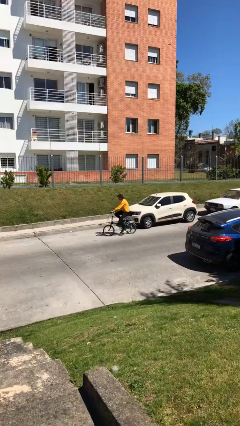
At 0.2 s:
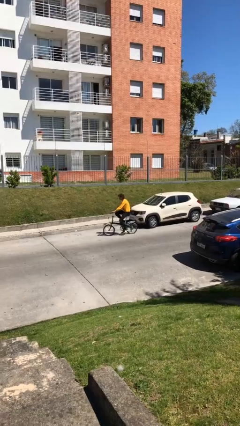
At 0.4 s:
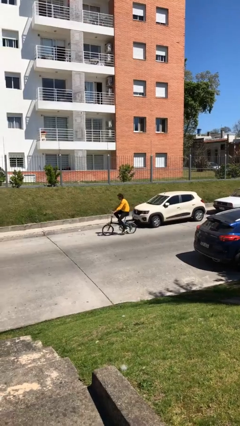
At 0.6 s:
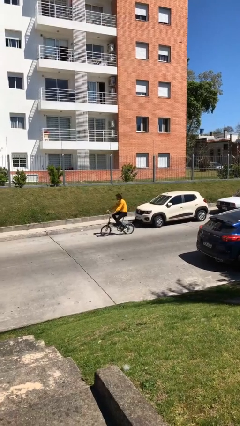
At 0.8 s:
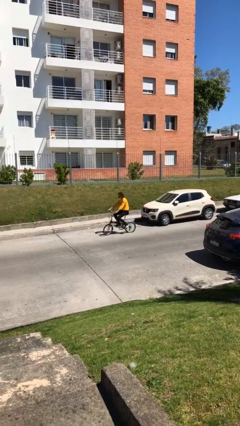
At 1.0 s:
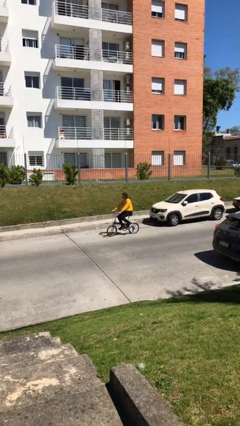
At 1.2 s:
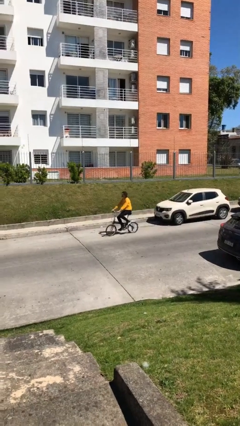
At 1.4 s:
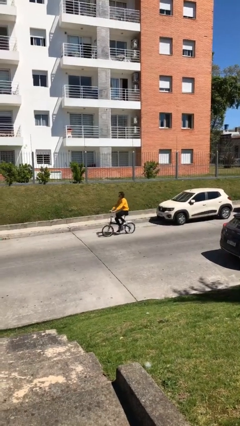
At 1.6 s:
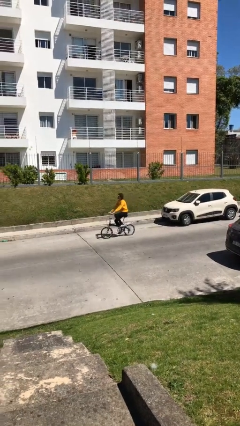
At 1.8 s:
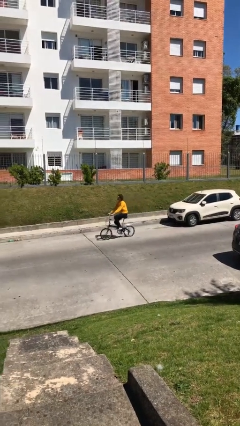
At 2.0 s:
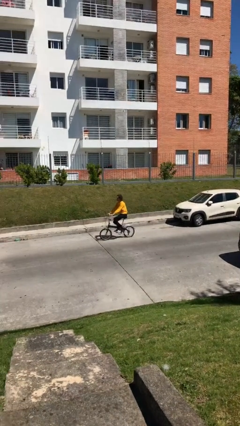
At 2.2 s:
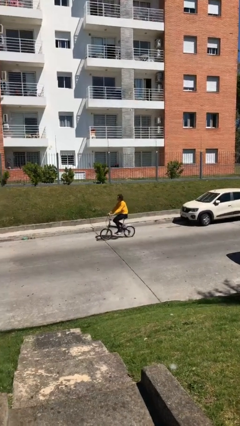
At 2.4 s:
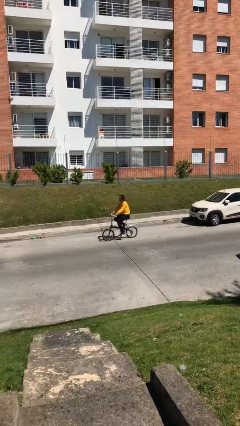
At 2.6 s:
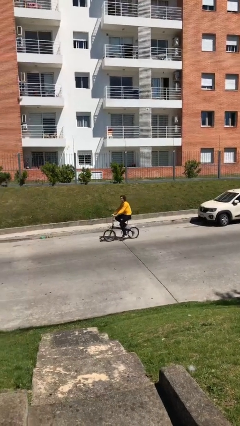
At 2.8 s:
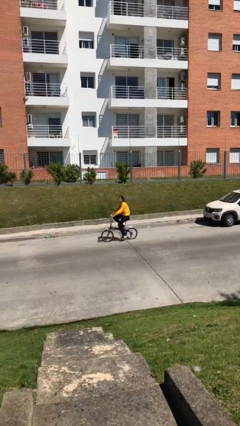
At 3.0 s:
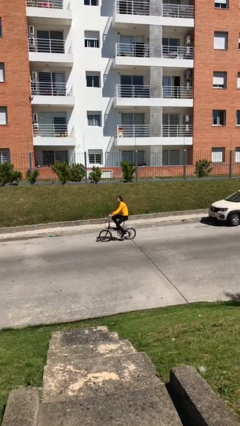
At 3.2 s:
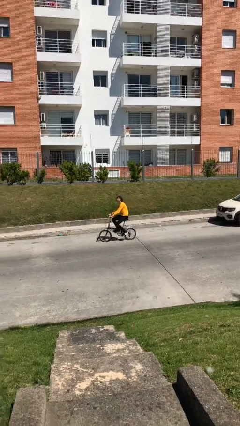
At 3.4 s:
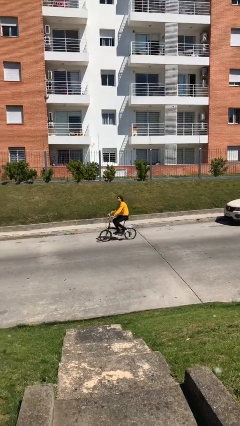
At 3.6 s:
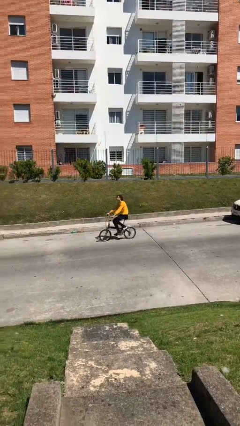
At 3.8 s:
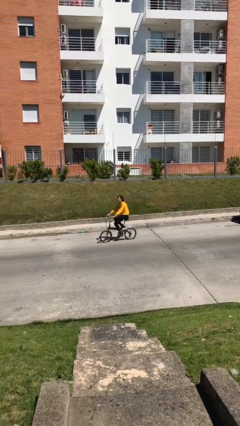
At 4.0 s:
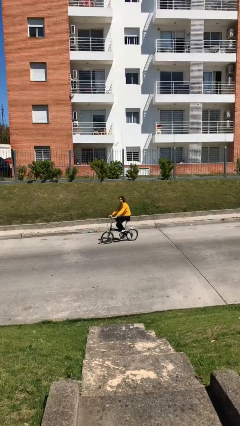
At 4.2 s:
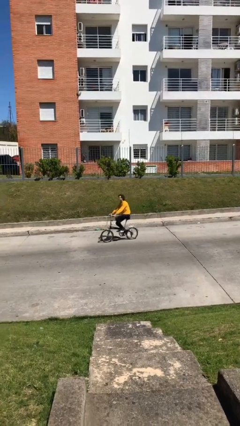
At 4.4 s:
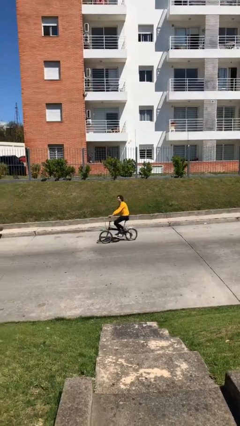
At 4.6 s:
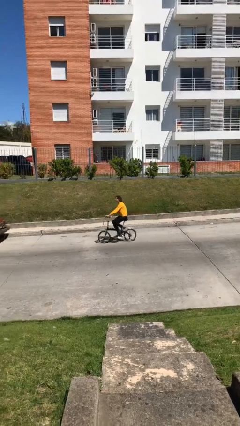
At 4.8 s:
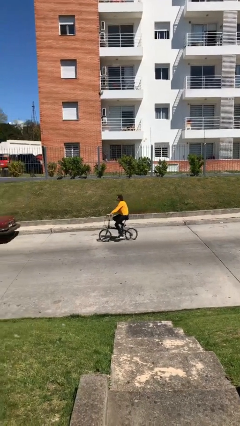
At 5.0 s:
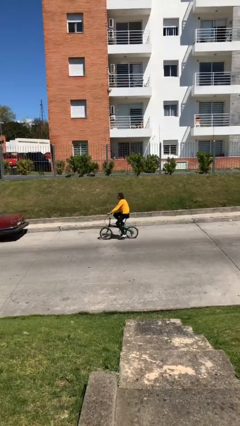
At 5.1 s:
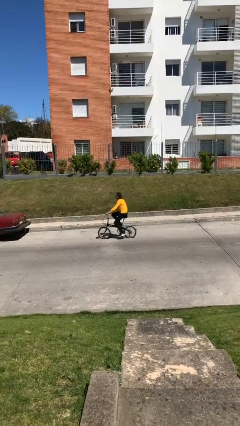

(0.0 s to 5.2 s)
person rides bicycle

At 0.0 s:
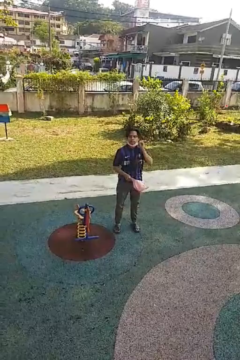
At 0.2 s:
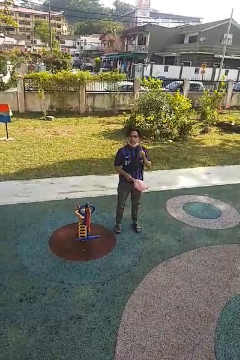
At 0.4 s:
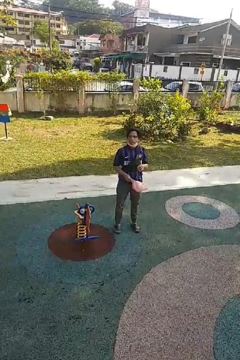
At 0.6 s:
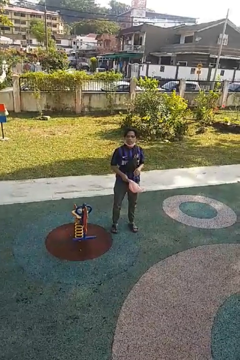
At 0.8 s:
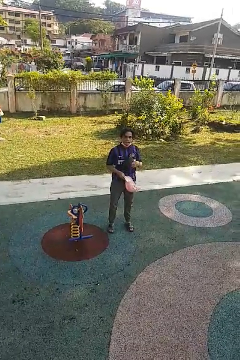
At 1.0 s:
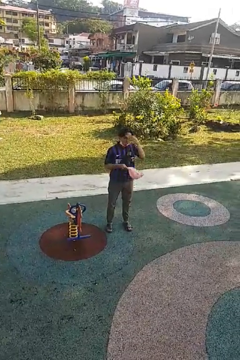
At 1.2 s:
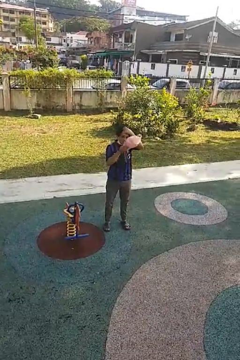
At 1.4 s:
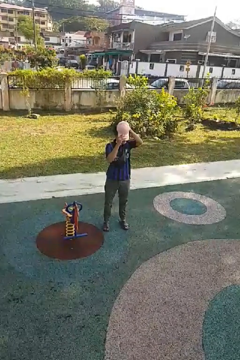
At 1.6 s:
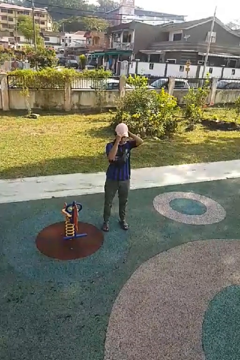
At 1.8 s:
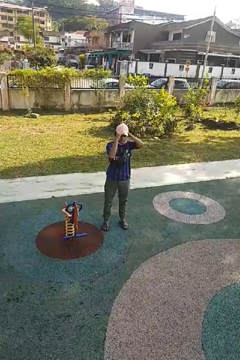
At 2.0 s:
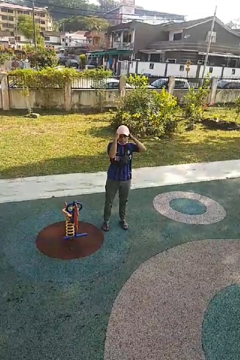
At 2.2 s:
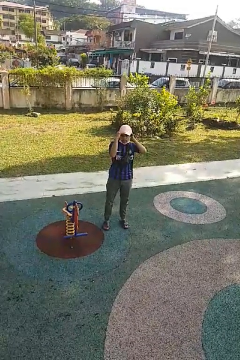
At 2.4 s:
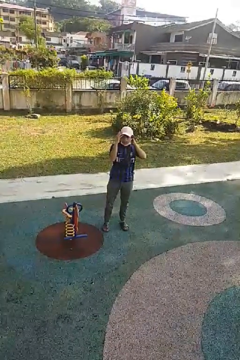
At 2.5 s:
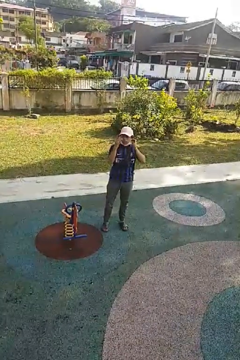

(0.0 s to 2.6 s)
person puts on hat

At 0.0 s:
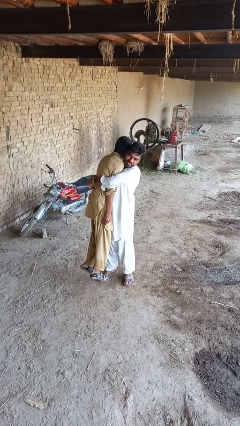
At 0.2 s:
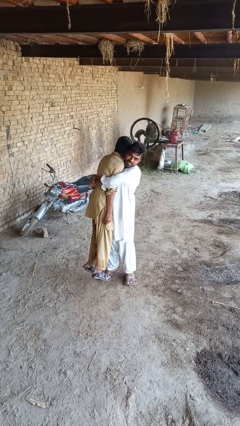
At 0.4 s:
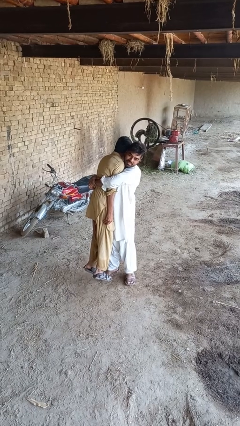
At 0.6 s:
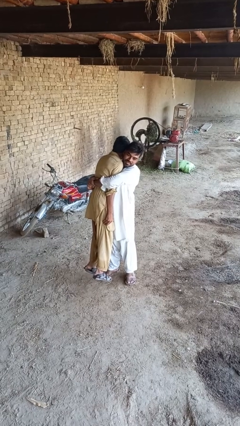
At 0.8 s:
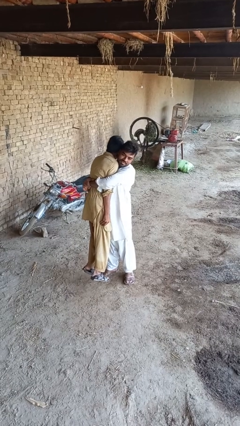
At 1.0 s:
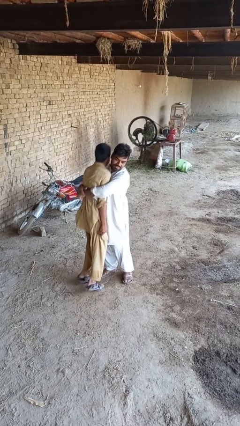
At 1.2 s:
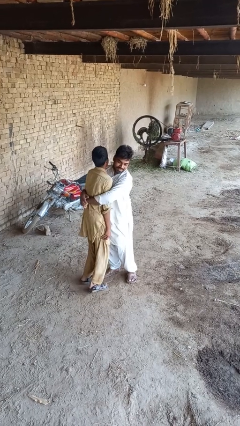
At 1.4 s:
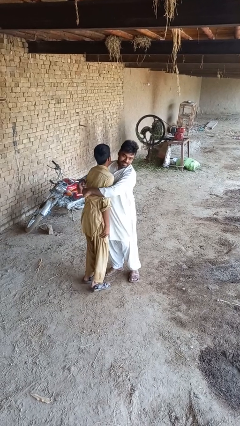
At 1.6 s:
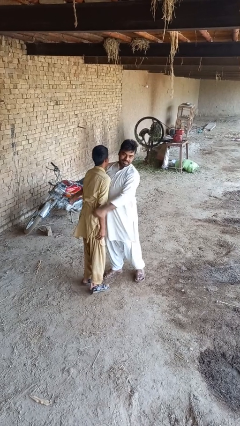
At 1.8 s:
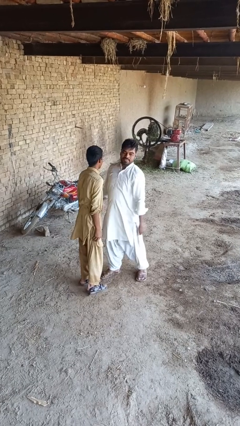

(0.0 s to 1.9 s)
person puts down person

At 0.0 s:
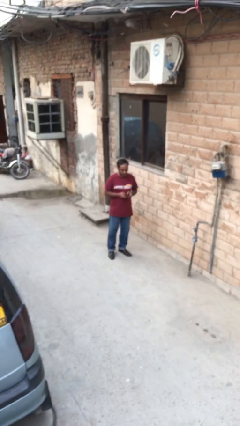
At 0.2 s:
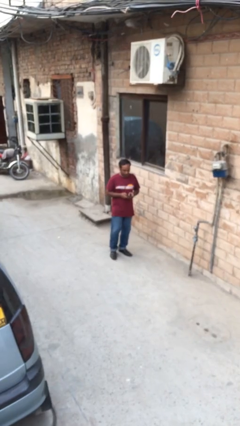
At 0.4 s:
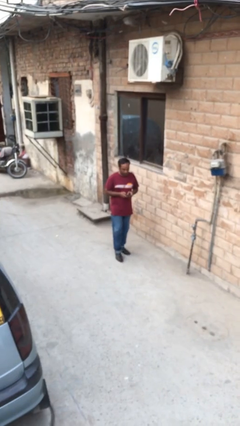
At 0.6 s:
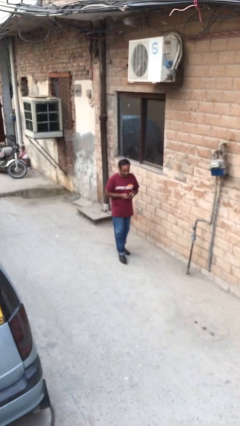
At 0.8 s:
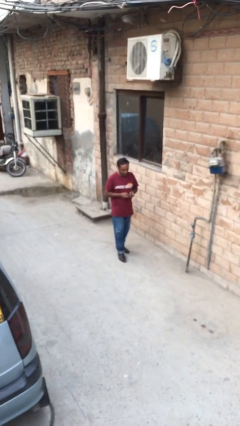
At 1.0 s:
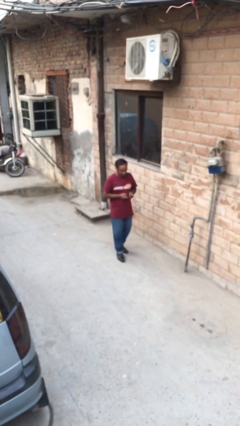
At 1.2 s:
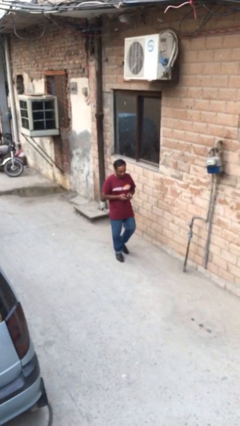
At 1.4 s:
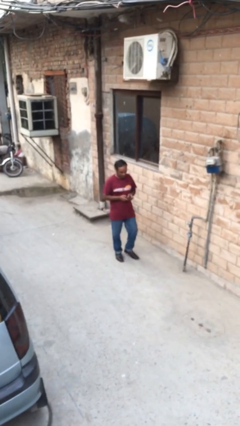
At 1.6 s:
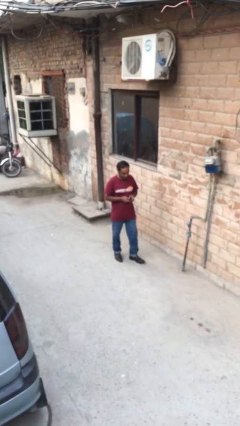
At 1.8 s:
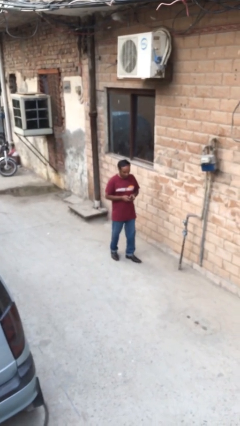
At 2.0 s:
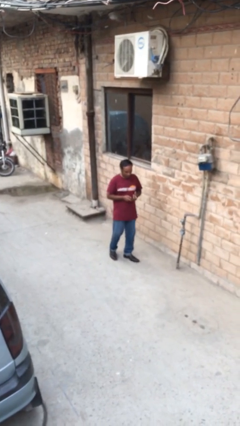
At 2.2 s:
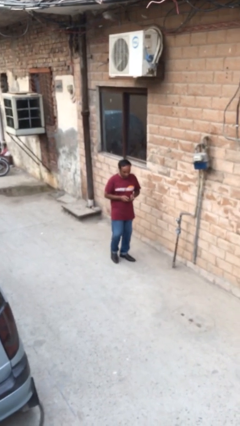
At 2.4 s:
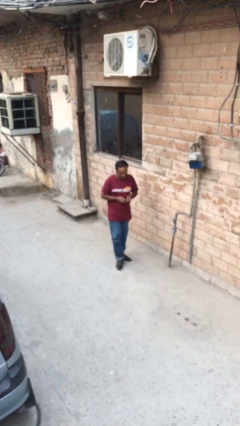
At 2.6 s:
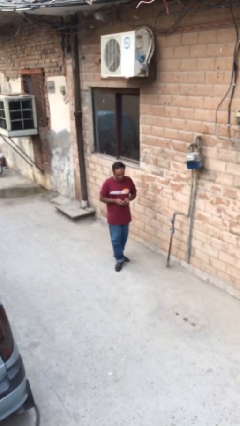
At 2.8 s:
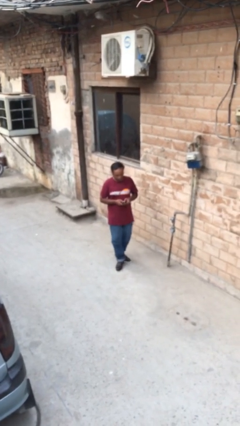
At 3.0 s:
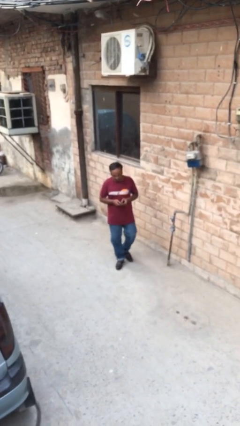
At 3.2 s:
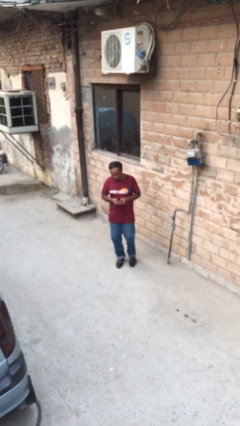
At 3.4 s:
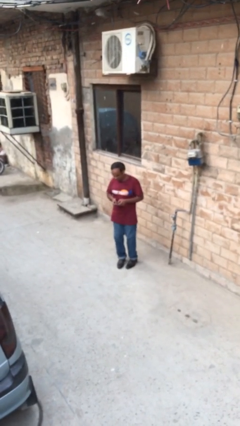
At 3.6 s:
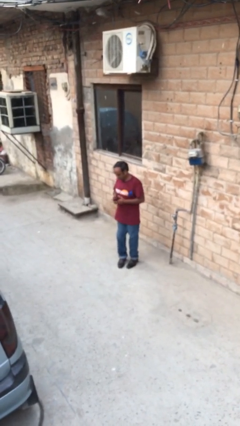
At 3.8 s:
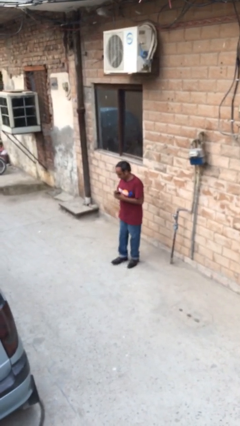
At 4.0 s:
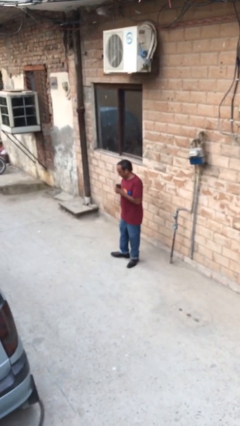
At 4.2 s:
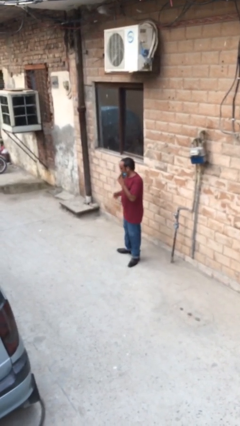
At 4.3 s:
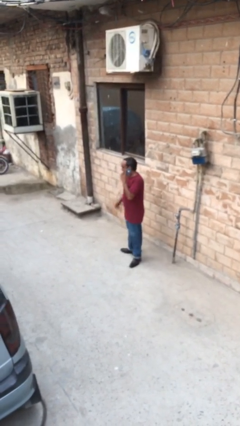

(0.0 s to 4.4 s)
person texts on phone

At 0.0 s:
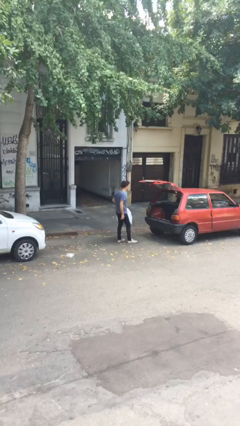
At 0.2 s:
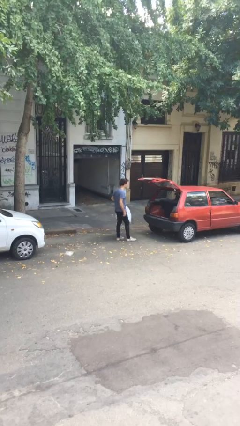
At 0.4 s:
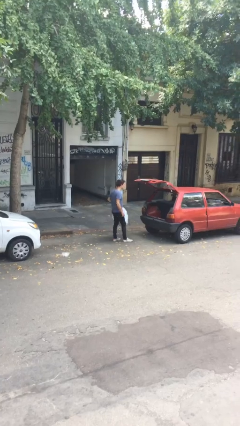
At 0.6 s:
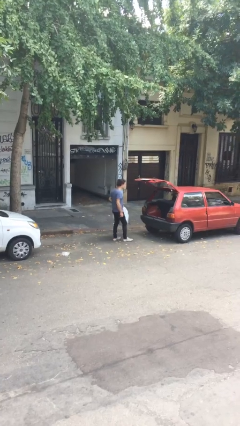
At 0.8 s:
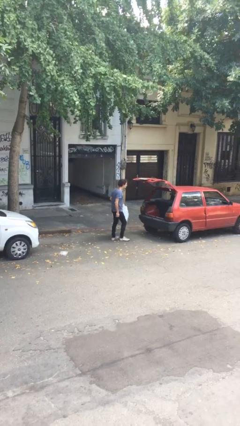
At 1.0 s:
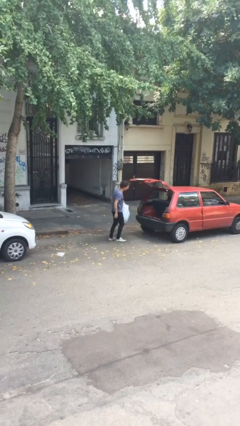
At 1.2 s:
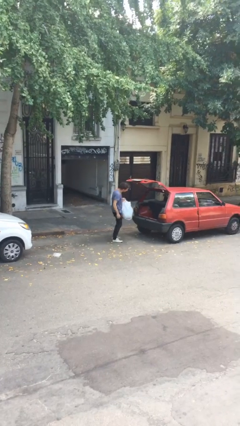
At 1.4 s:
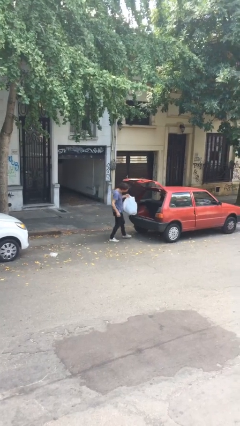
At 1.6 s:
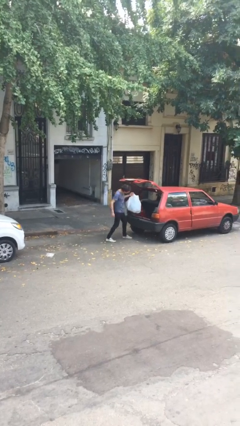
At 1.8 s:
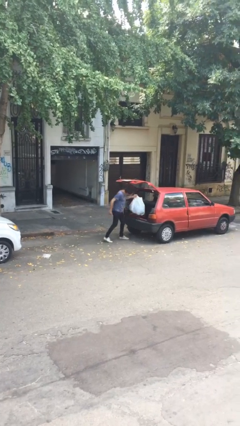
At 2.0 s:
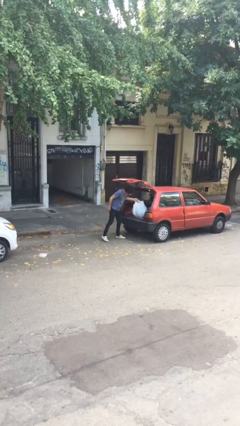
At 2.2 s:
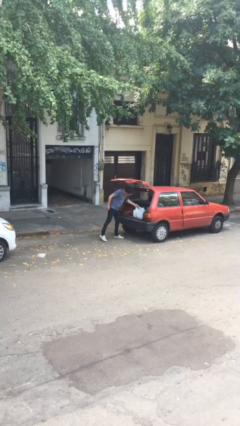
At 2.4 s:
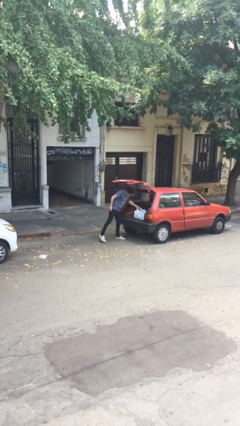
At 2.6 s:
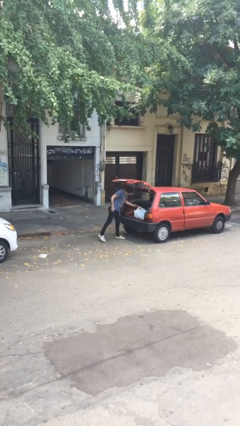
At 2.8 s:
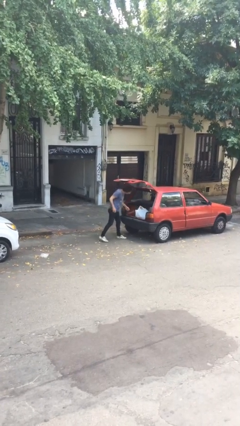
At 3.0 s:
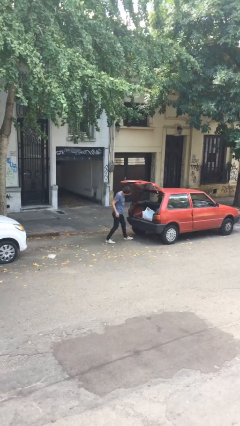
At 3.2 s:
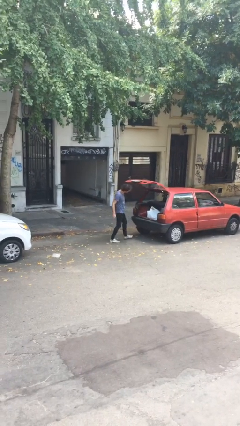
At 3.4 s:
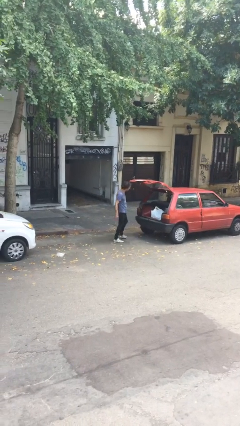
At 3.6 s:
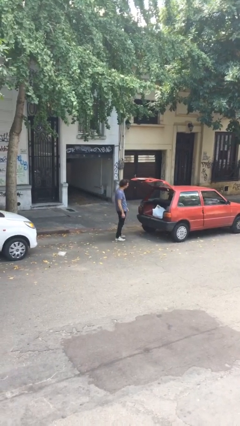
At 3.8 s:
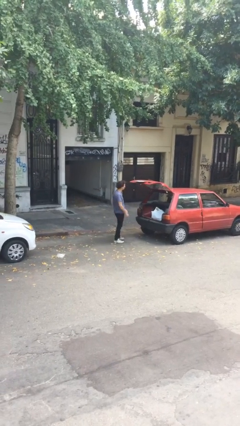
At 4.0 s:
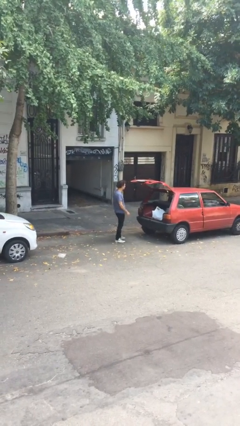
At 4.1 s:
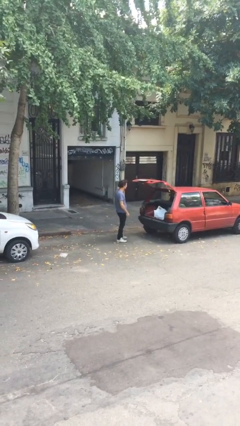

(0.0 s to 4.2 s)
person loads car
